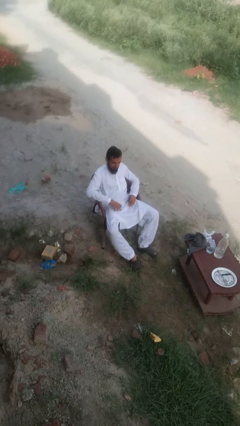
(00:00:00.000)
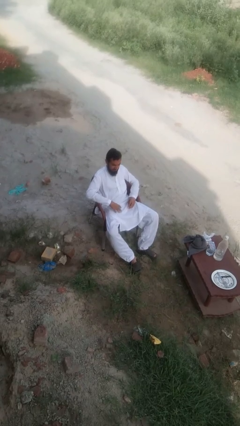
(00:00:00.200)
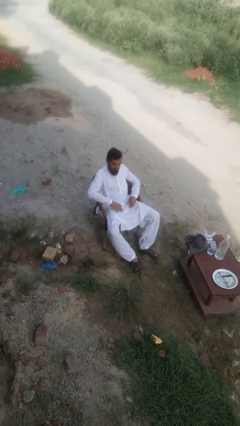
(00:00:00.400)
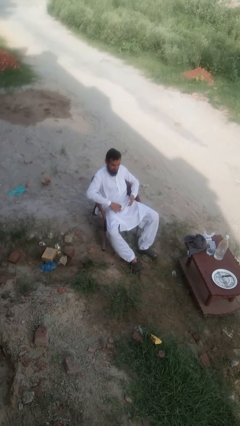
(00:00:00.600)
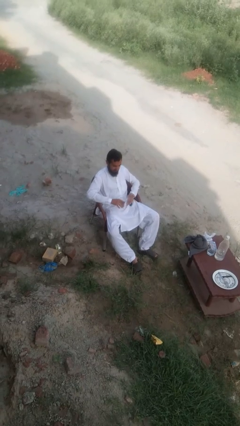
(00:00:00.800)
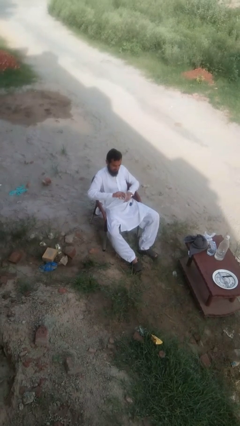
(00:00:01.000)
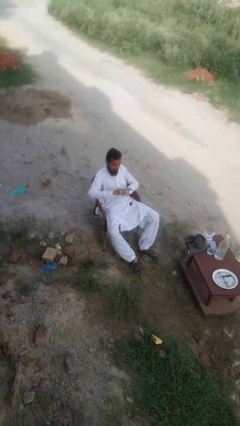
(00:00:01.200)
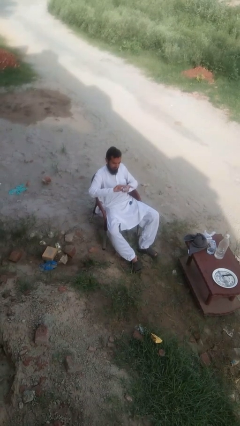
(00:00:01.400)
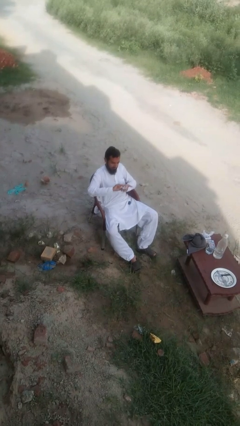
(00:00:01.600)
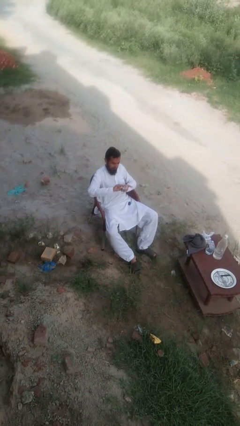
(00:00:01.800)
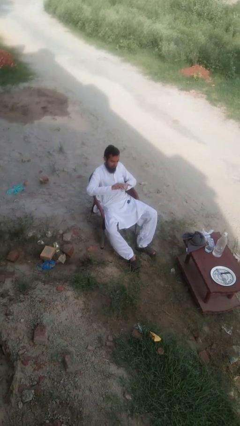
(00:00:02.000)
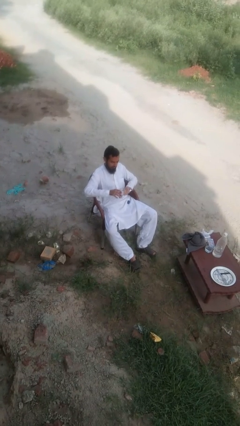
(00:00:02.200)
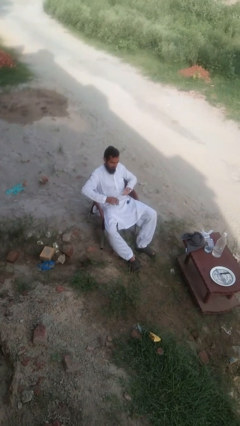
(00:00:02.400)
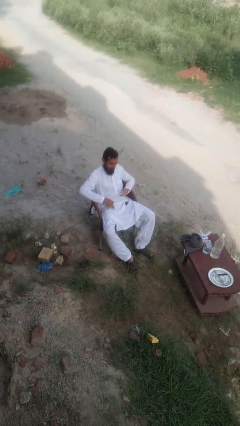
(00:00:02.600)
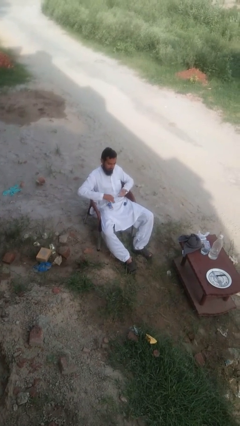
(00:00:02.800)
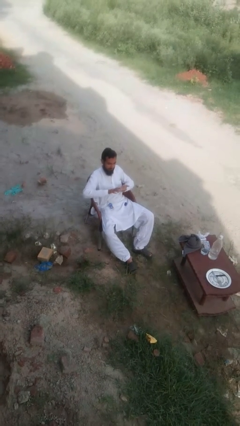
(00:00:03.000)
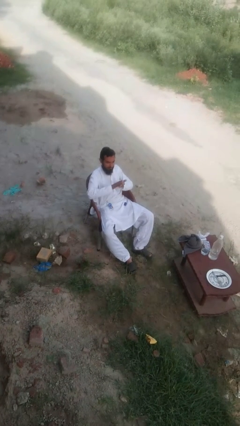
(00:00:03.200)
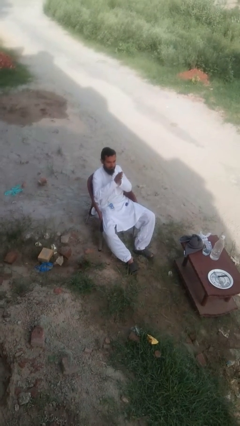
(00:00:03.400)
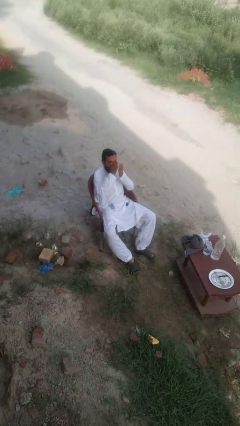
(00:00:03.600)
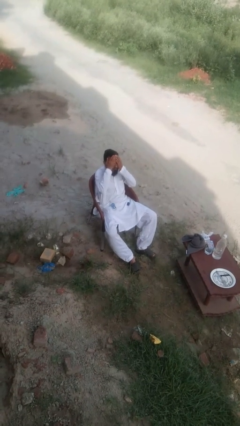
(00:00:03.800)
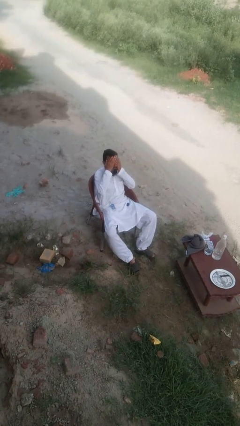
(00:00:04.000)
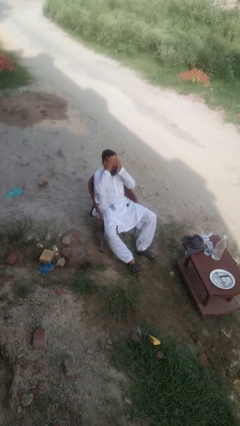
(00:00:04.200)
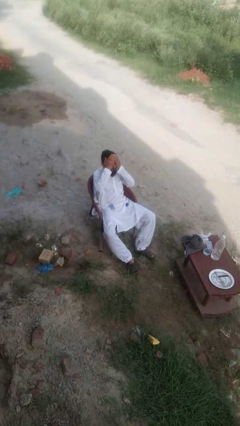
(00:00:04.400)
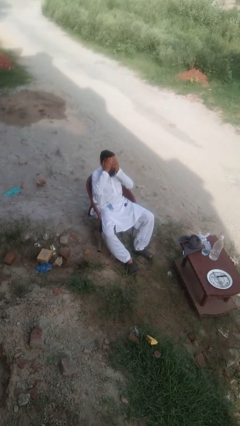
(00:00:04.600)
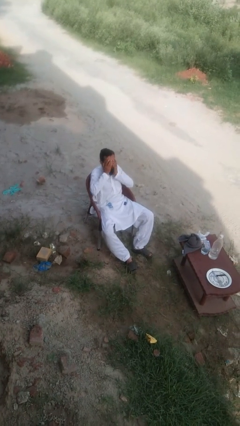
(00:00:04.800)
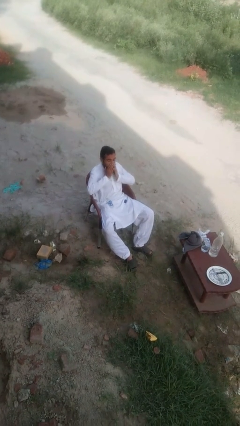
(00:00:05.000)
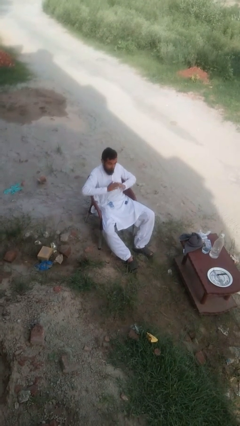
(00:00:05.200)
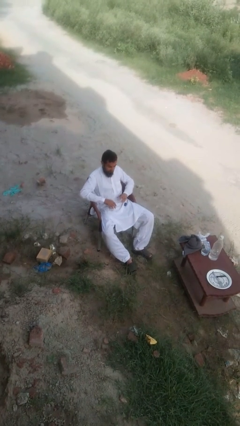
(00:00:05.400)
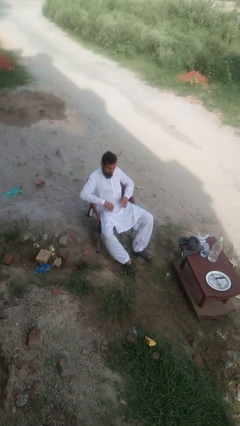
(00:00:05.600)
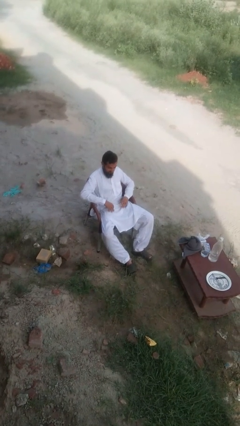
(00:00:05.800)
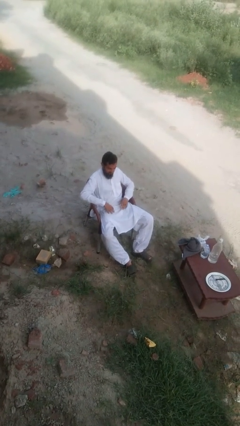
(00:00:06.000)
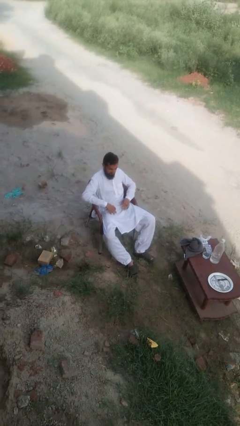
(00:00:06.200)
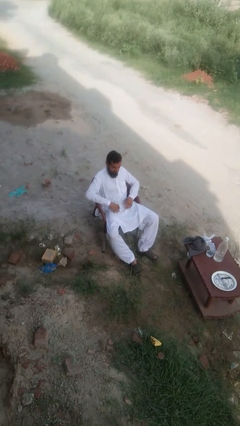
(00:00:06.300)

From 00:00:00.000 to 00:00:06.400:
person applies facial moisturizer

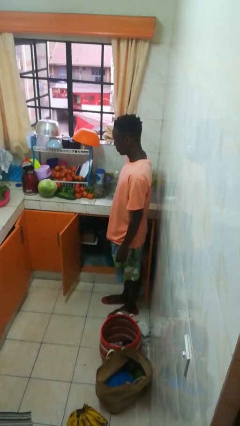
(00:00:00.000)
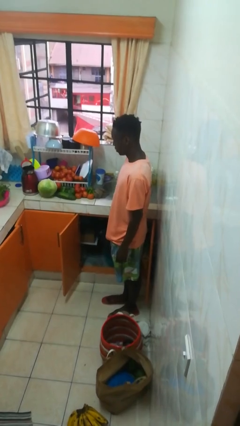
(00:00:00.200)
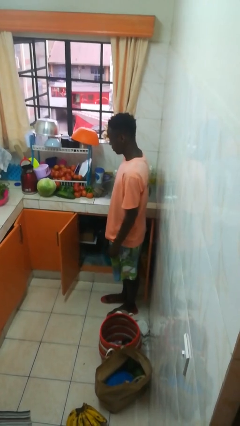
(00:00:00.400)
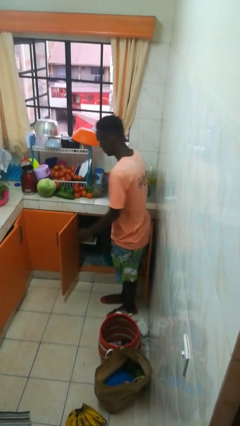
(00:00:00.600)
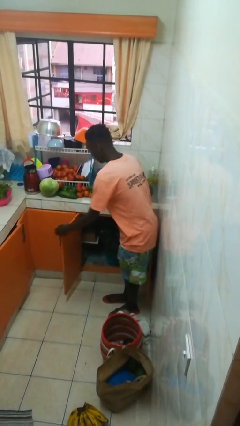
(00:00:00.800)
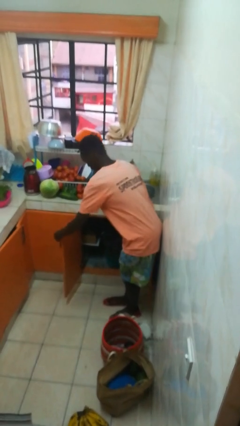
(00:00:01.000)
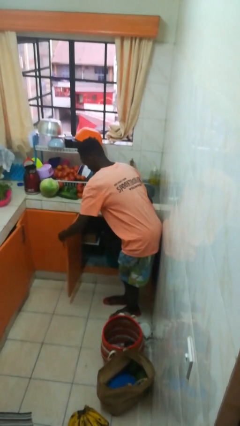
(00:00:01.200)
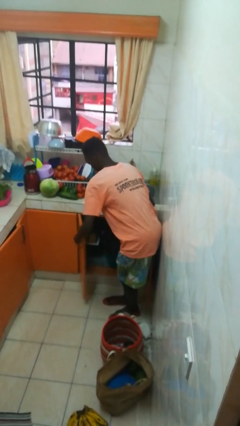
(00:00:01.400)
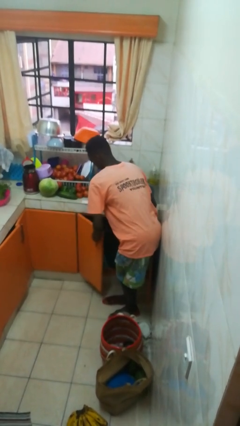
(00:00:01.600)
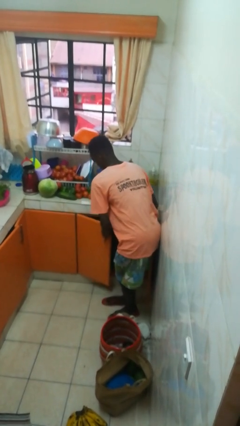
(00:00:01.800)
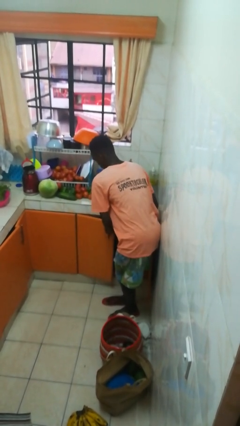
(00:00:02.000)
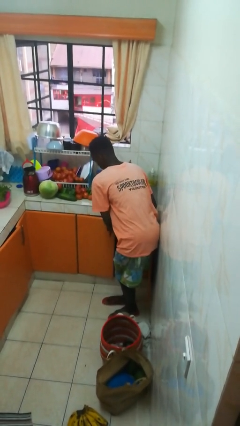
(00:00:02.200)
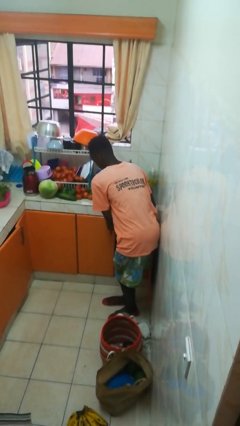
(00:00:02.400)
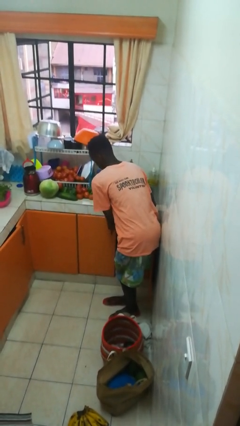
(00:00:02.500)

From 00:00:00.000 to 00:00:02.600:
person closes cabinet

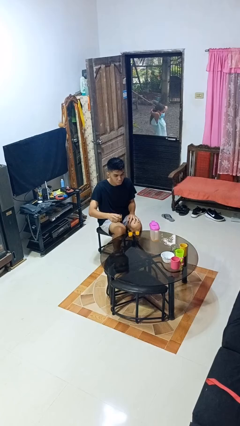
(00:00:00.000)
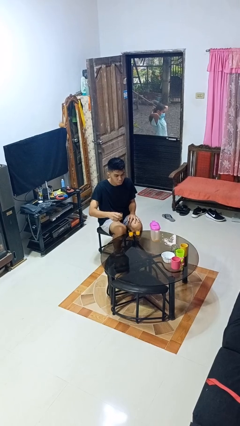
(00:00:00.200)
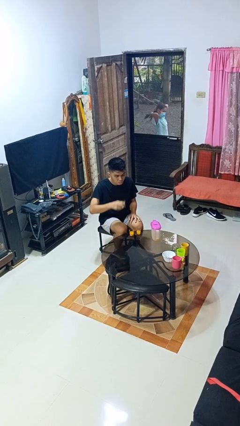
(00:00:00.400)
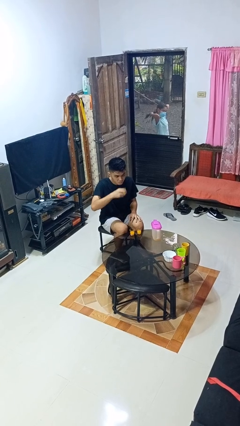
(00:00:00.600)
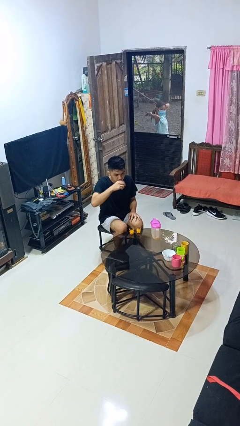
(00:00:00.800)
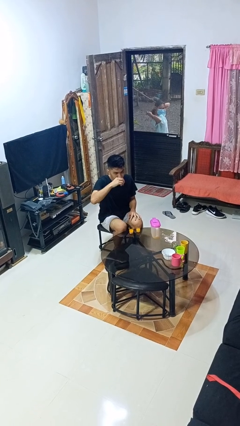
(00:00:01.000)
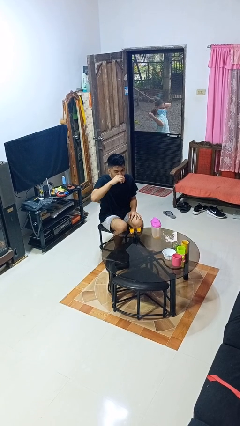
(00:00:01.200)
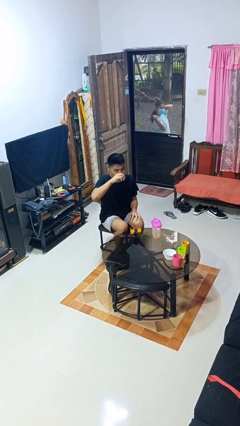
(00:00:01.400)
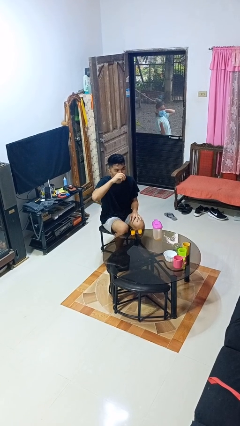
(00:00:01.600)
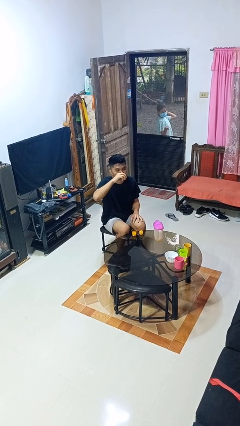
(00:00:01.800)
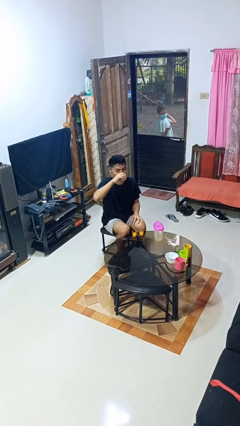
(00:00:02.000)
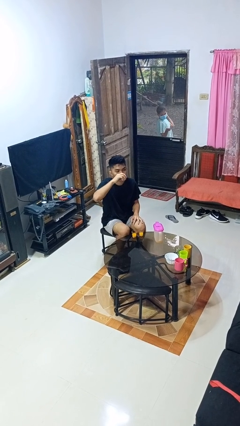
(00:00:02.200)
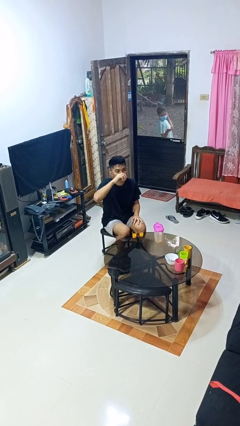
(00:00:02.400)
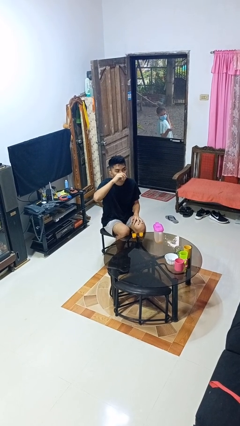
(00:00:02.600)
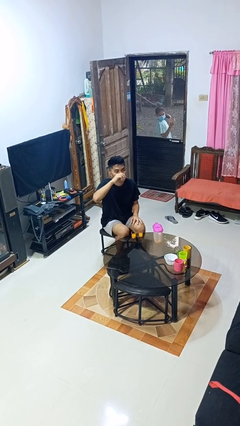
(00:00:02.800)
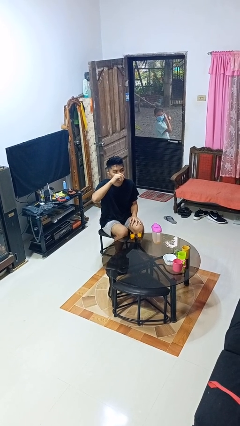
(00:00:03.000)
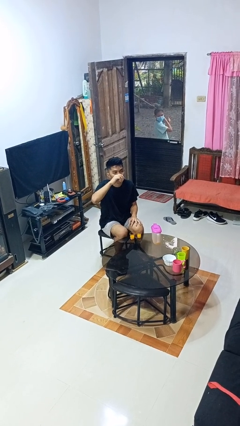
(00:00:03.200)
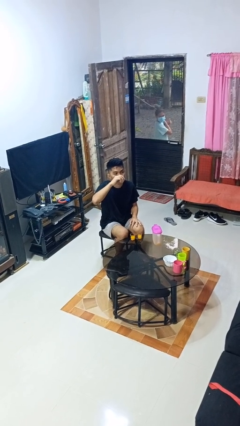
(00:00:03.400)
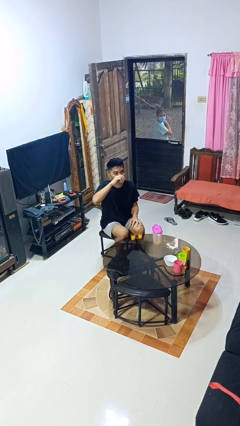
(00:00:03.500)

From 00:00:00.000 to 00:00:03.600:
person drinks from shotglass

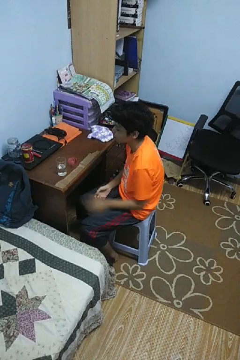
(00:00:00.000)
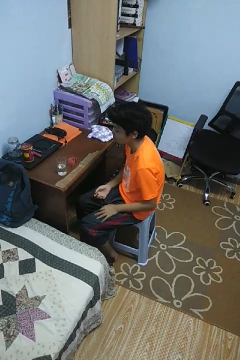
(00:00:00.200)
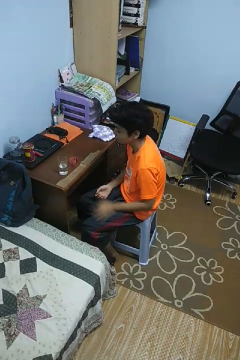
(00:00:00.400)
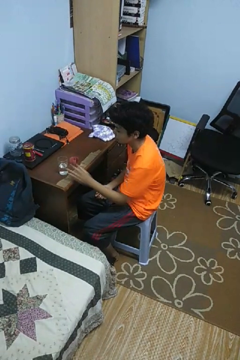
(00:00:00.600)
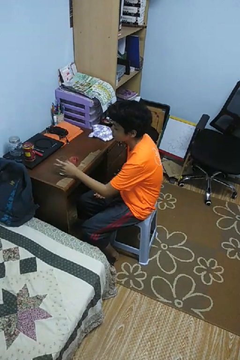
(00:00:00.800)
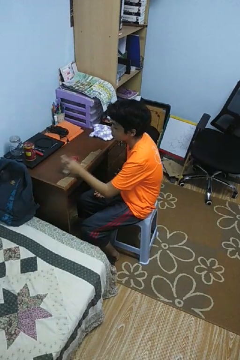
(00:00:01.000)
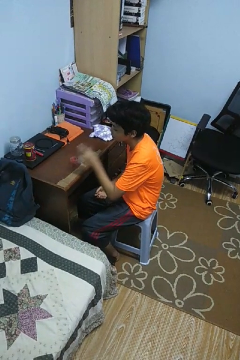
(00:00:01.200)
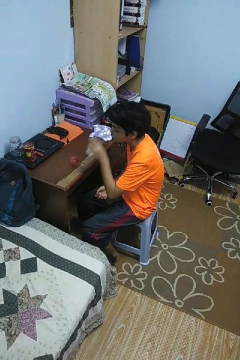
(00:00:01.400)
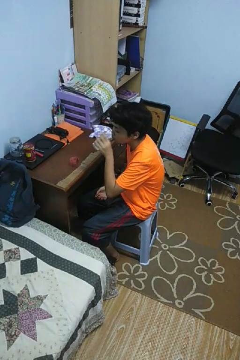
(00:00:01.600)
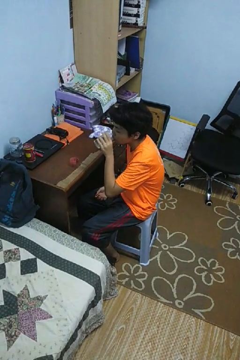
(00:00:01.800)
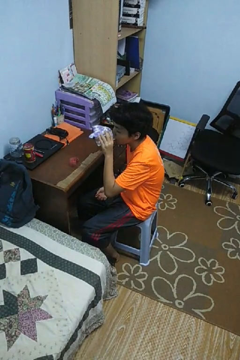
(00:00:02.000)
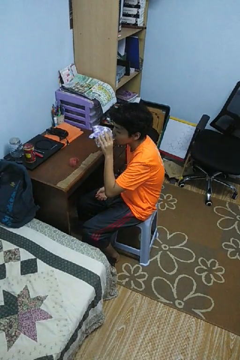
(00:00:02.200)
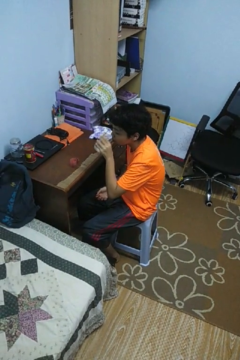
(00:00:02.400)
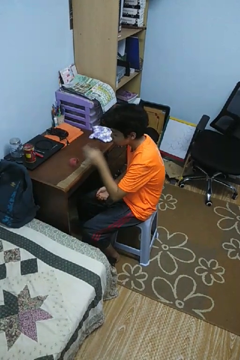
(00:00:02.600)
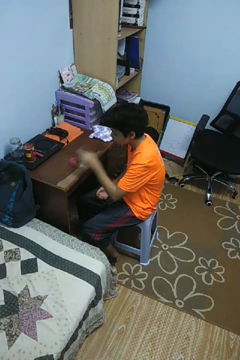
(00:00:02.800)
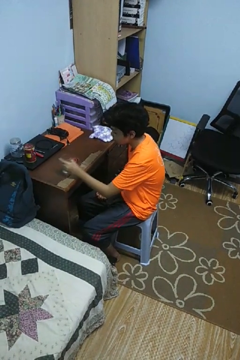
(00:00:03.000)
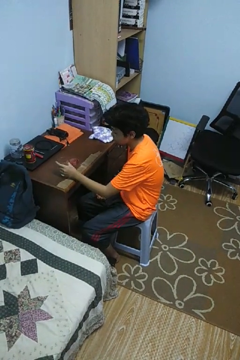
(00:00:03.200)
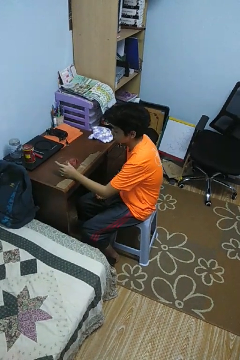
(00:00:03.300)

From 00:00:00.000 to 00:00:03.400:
person drinks from cup

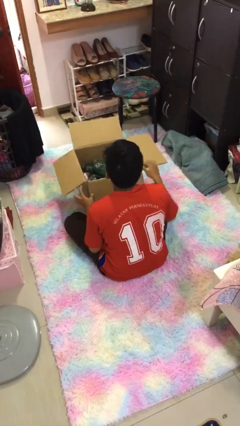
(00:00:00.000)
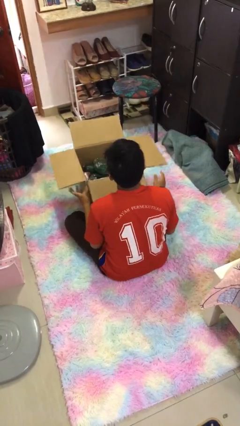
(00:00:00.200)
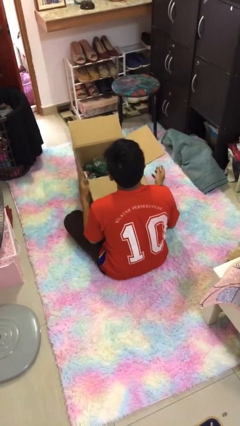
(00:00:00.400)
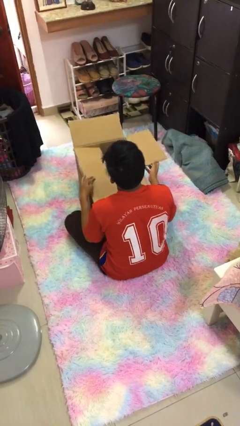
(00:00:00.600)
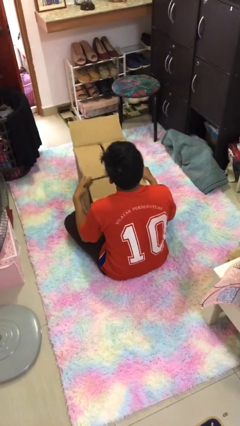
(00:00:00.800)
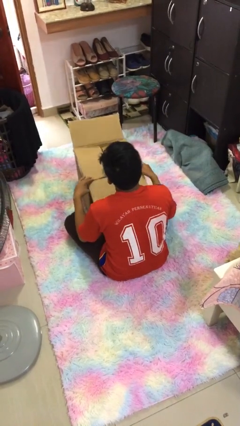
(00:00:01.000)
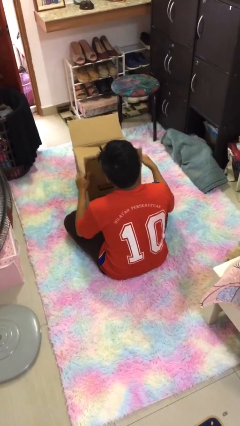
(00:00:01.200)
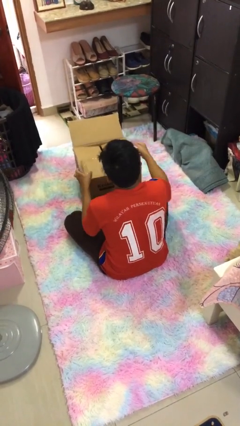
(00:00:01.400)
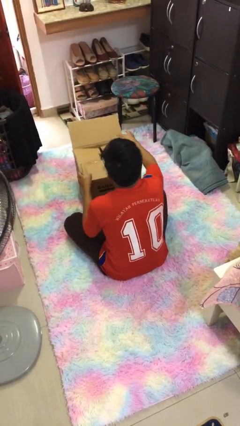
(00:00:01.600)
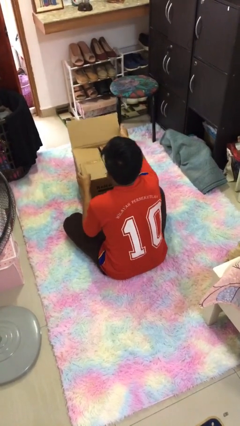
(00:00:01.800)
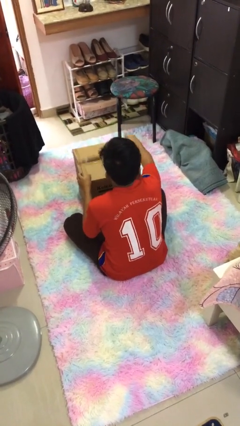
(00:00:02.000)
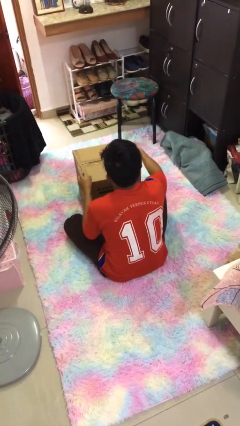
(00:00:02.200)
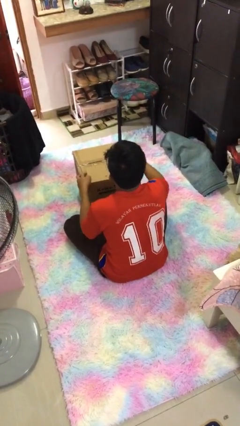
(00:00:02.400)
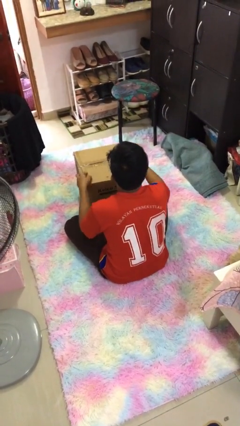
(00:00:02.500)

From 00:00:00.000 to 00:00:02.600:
person closes box
